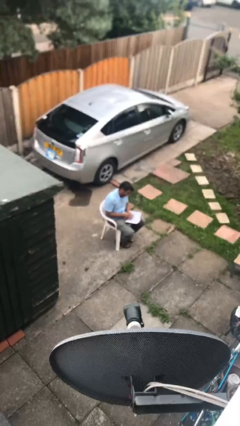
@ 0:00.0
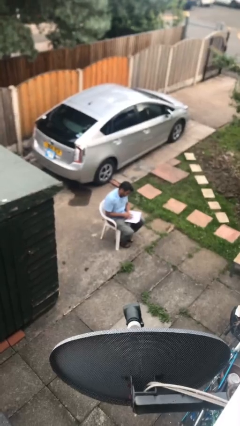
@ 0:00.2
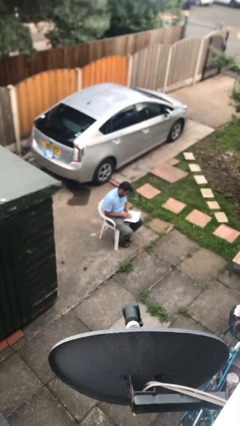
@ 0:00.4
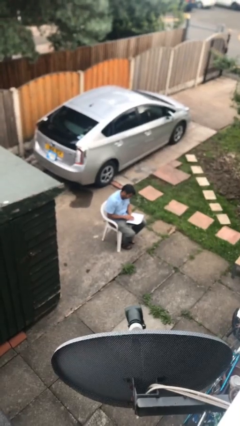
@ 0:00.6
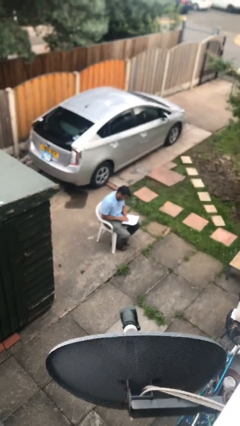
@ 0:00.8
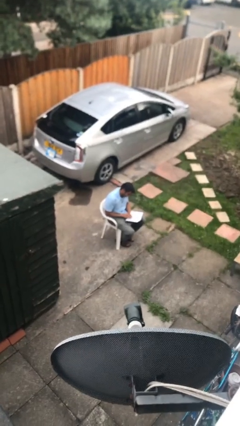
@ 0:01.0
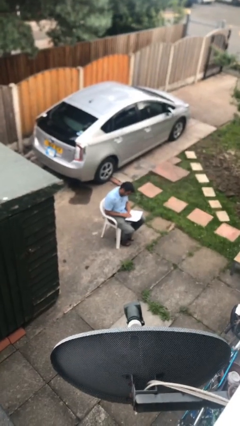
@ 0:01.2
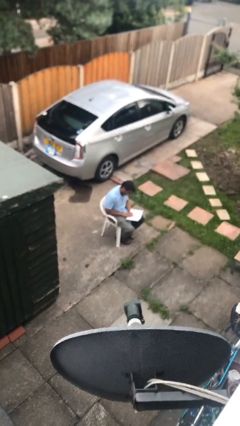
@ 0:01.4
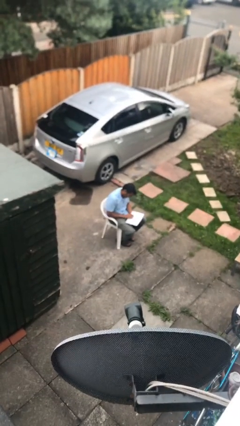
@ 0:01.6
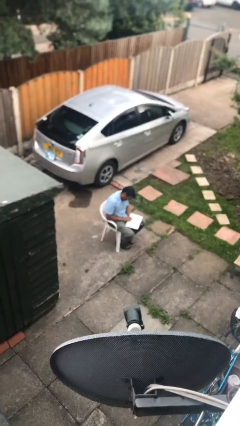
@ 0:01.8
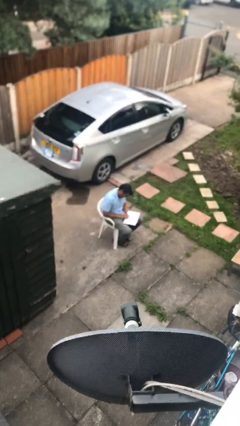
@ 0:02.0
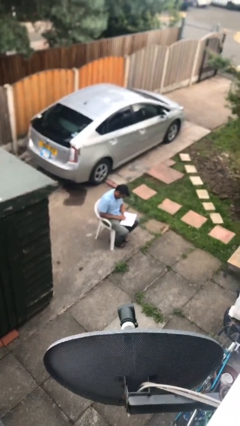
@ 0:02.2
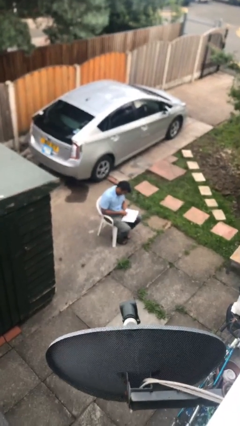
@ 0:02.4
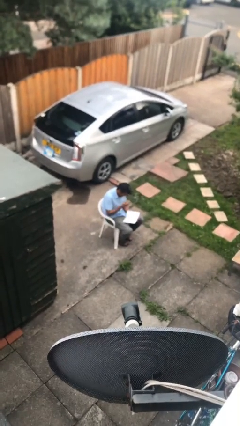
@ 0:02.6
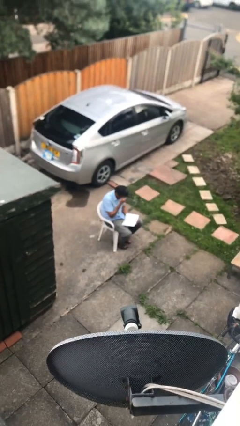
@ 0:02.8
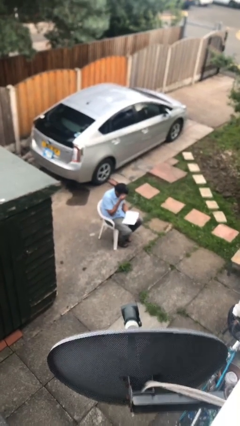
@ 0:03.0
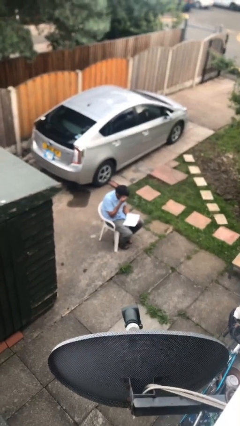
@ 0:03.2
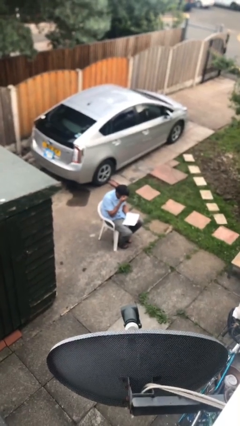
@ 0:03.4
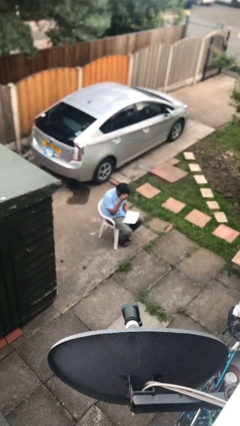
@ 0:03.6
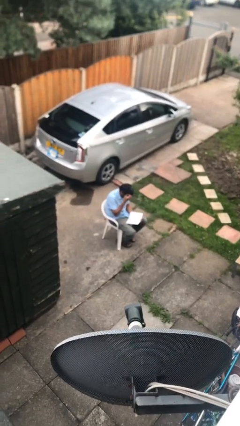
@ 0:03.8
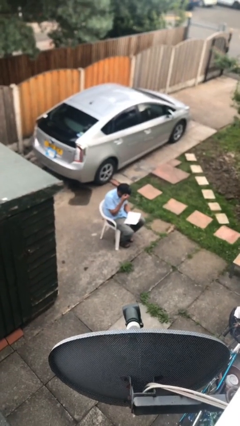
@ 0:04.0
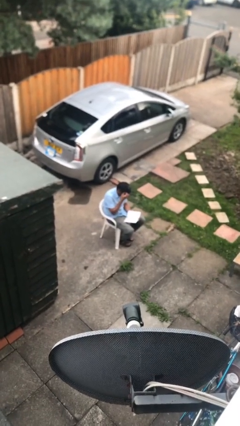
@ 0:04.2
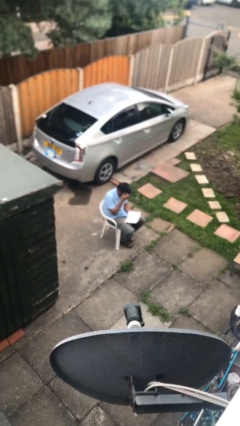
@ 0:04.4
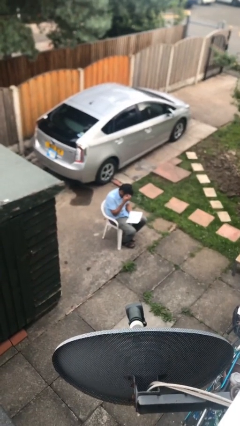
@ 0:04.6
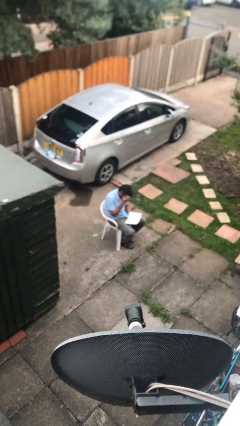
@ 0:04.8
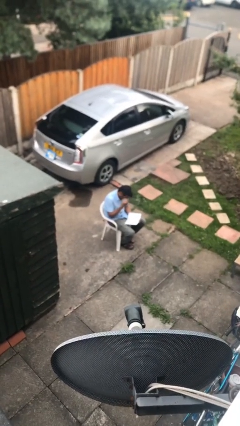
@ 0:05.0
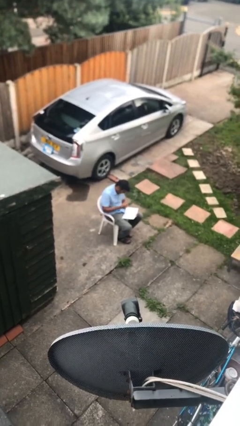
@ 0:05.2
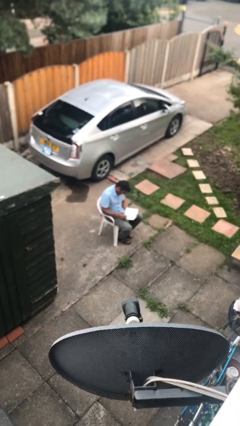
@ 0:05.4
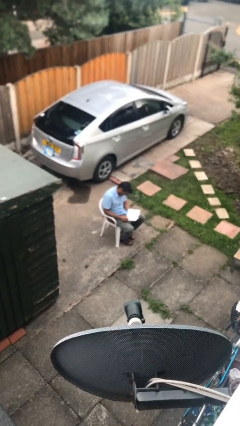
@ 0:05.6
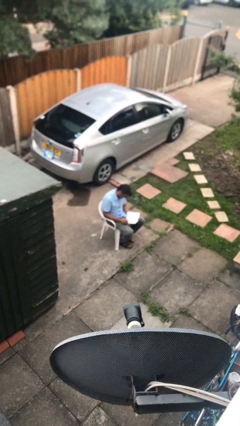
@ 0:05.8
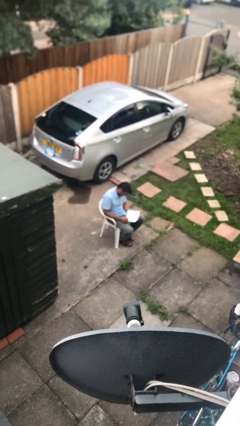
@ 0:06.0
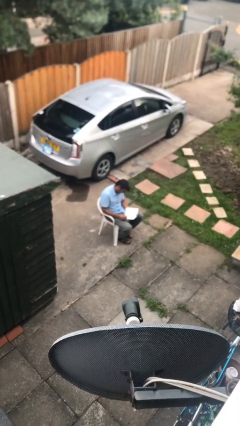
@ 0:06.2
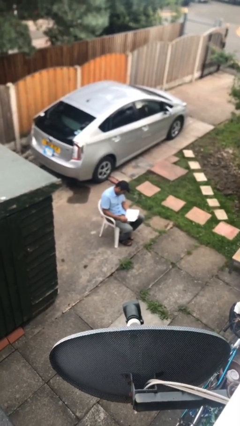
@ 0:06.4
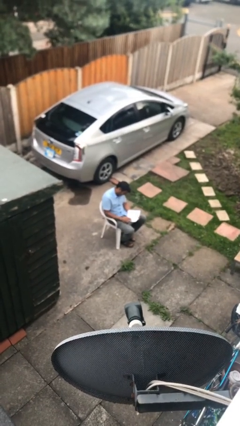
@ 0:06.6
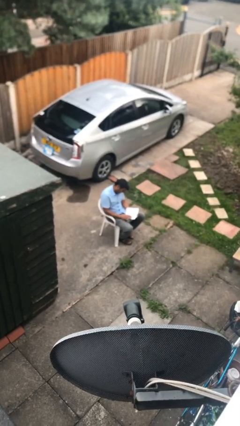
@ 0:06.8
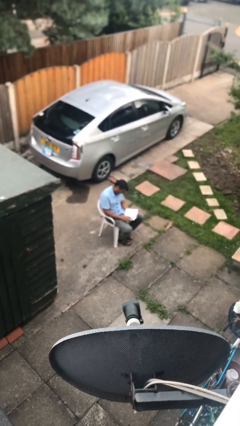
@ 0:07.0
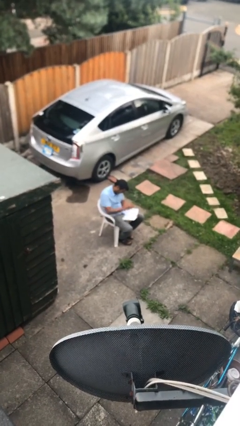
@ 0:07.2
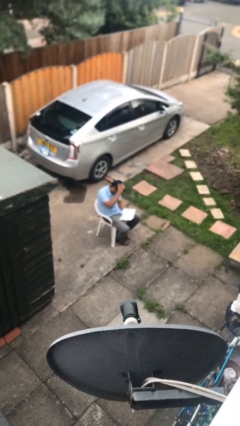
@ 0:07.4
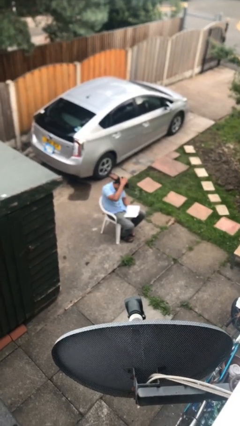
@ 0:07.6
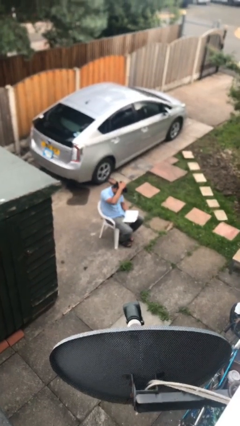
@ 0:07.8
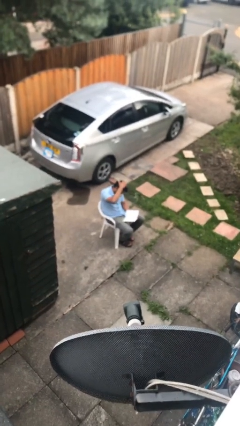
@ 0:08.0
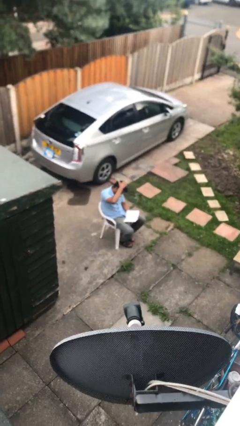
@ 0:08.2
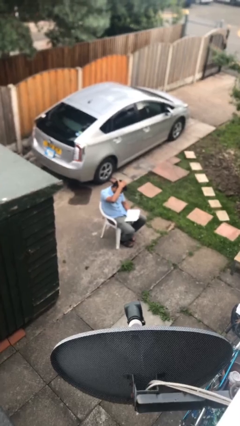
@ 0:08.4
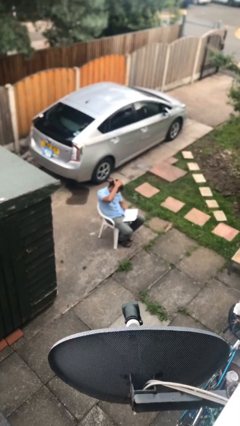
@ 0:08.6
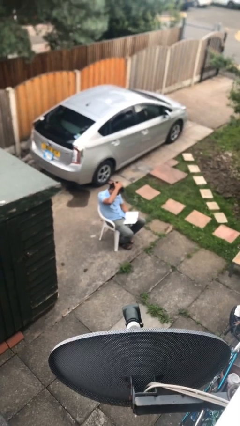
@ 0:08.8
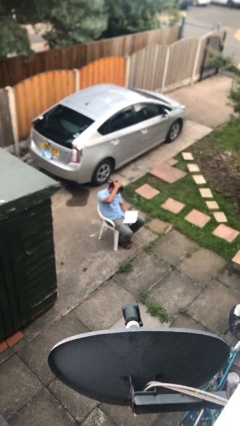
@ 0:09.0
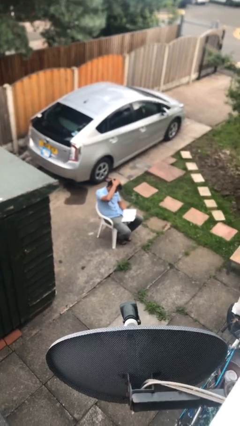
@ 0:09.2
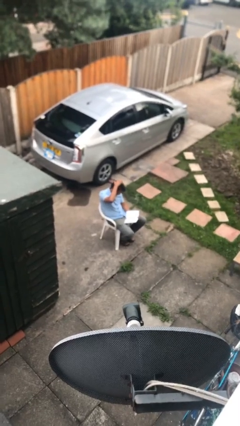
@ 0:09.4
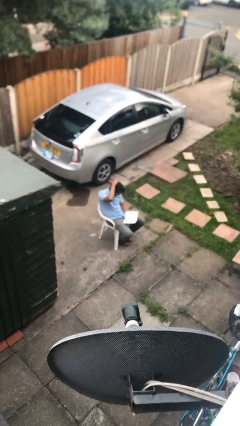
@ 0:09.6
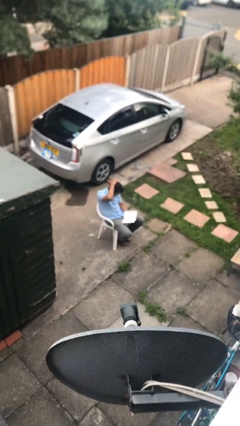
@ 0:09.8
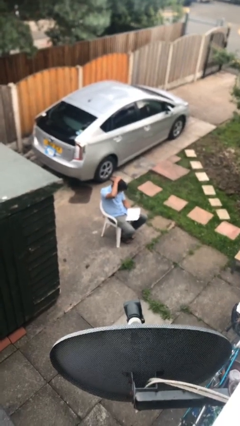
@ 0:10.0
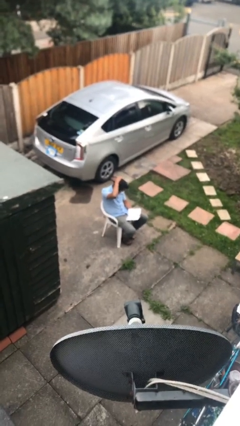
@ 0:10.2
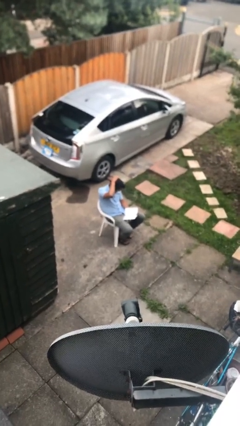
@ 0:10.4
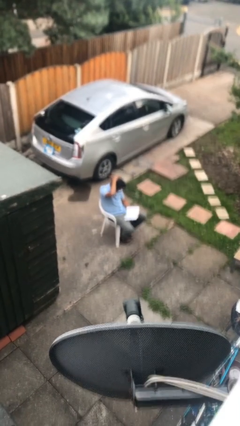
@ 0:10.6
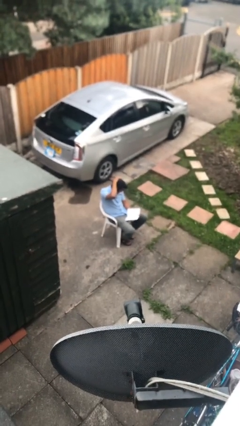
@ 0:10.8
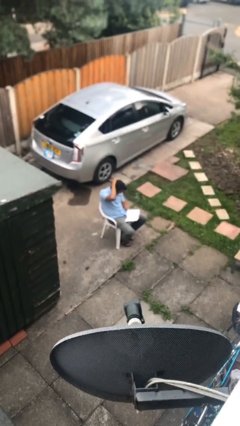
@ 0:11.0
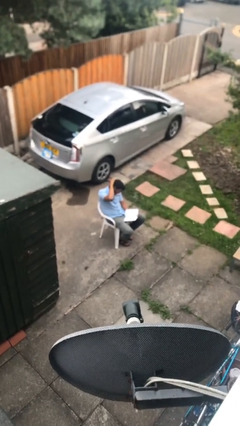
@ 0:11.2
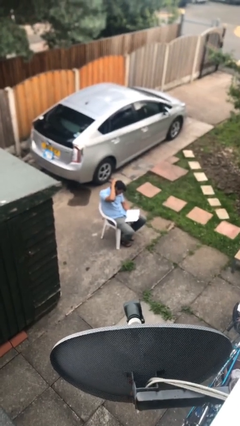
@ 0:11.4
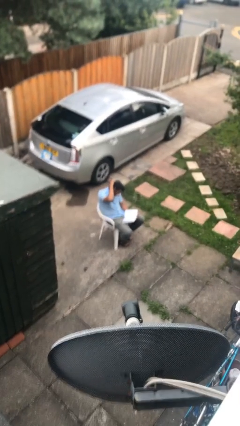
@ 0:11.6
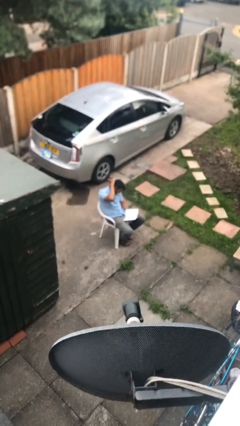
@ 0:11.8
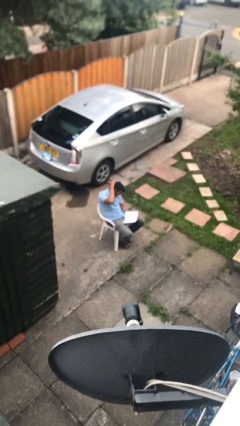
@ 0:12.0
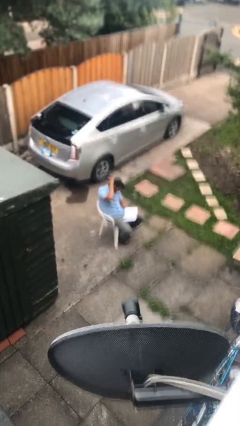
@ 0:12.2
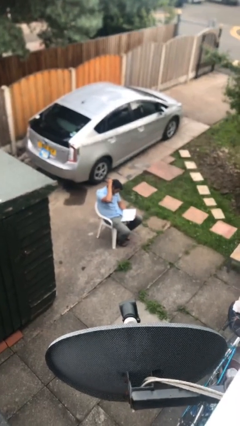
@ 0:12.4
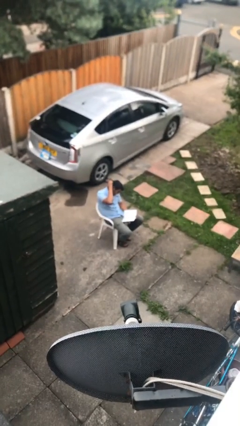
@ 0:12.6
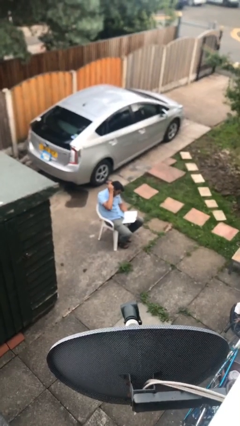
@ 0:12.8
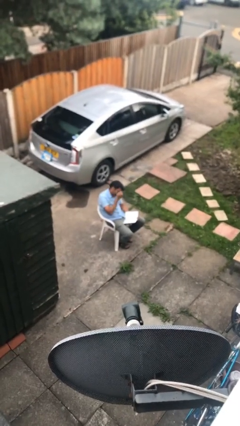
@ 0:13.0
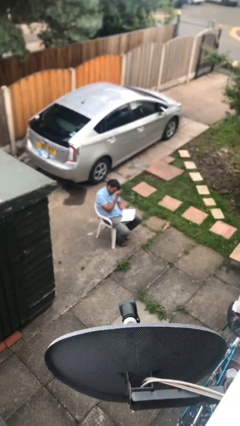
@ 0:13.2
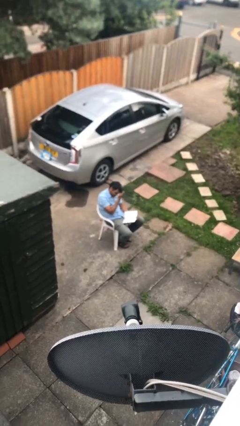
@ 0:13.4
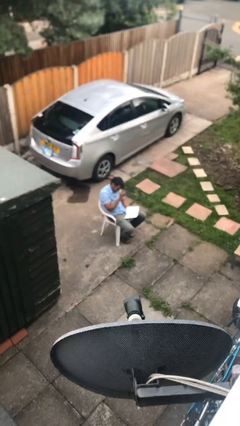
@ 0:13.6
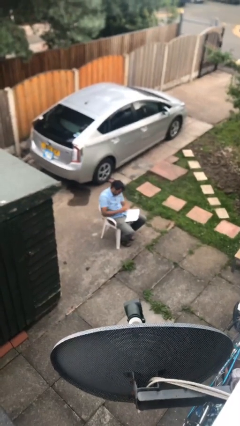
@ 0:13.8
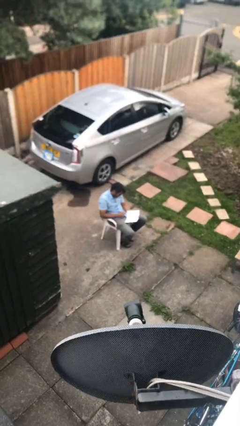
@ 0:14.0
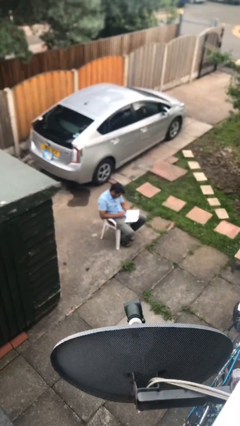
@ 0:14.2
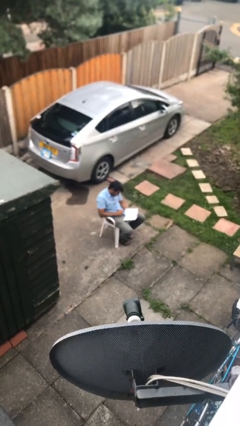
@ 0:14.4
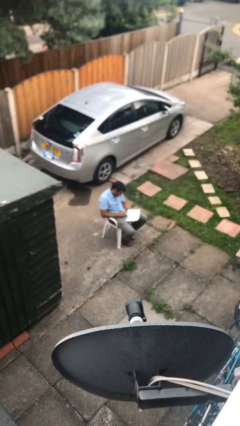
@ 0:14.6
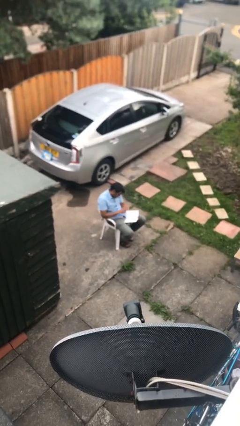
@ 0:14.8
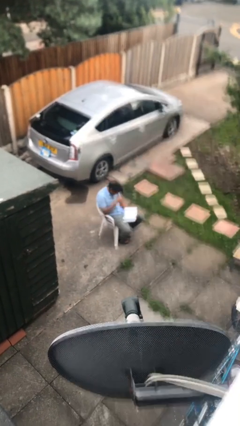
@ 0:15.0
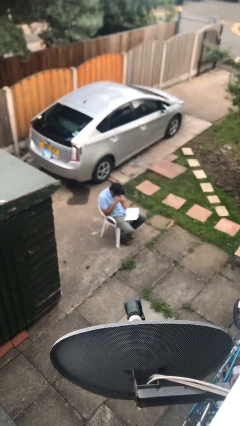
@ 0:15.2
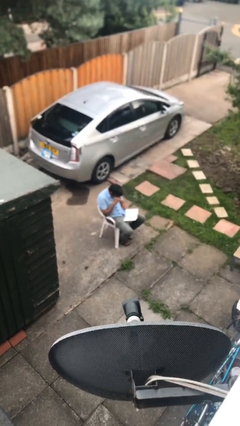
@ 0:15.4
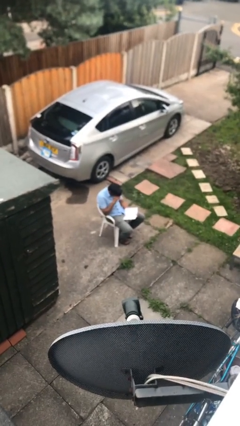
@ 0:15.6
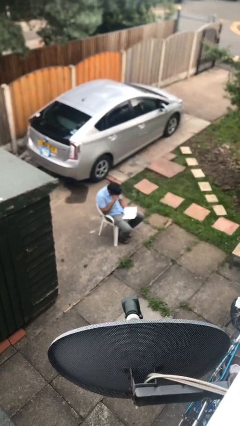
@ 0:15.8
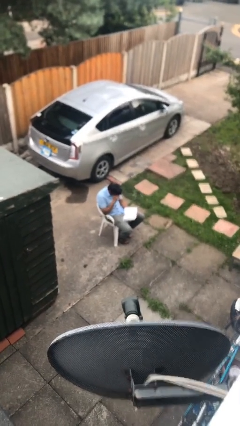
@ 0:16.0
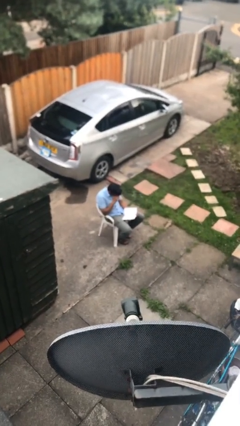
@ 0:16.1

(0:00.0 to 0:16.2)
person reads document

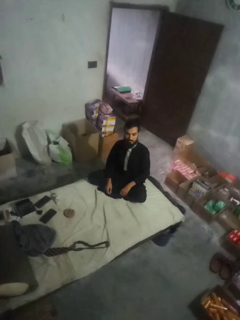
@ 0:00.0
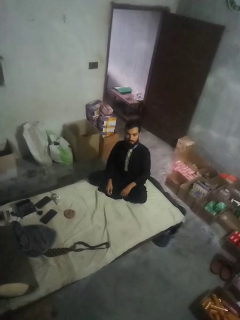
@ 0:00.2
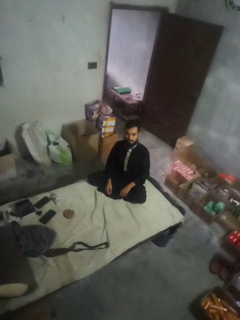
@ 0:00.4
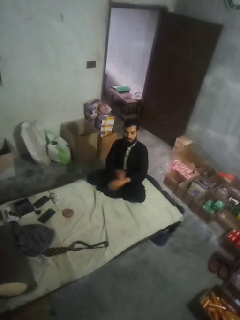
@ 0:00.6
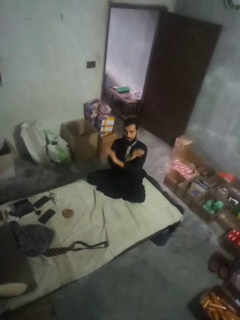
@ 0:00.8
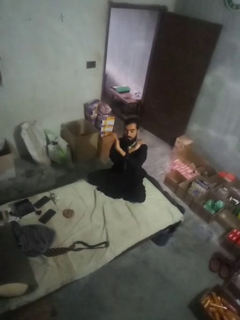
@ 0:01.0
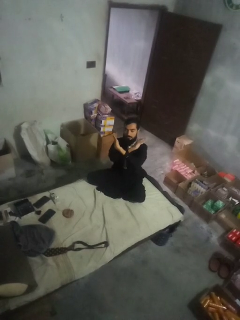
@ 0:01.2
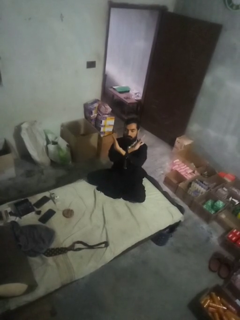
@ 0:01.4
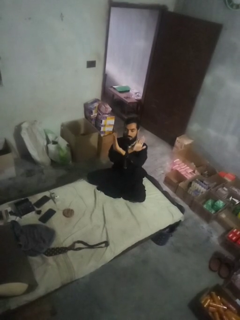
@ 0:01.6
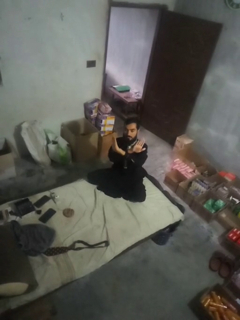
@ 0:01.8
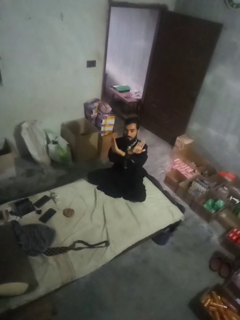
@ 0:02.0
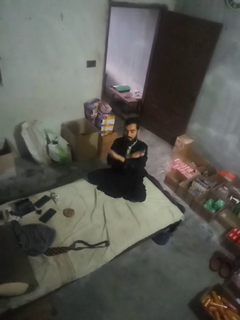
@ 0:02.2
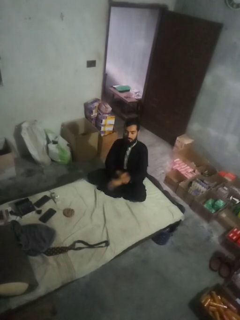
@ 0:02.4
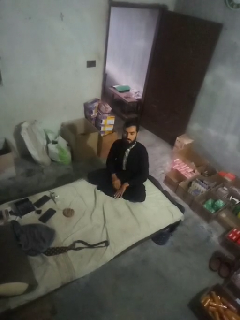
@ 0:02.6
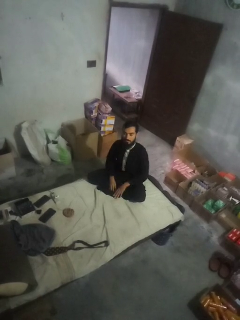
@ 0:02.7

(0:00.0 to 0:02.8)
person gestures arms x
